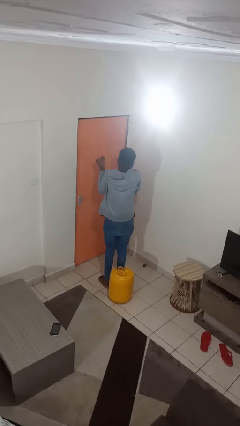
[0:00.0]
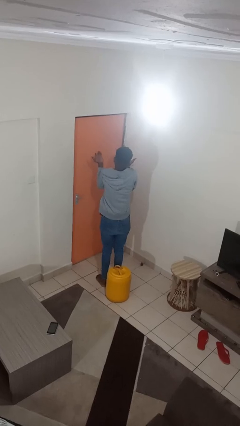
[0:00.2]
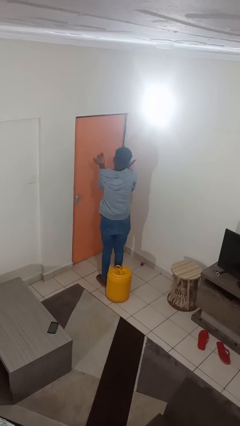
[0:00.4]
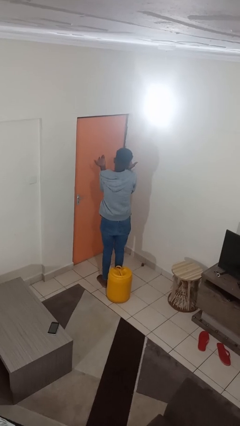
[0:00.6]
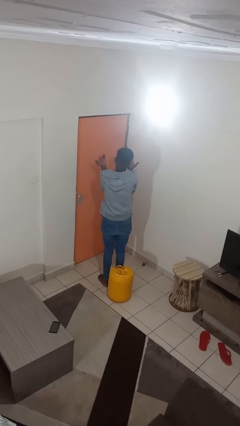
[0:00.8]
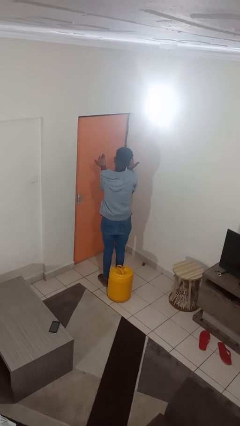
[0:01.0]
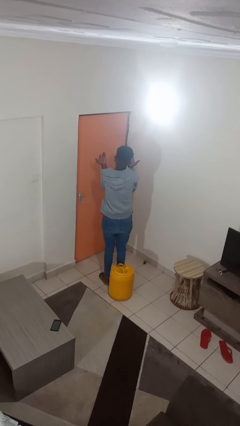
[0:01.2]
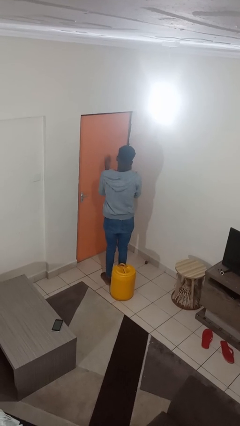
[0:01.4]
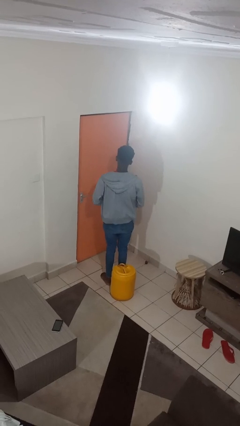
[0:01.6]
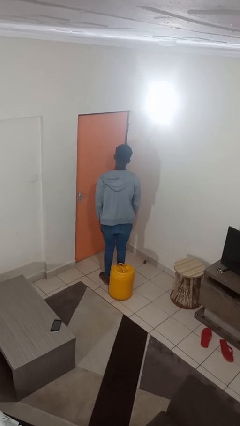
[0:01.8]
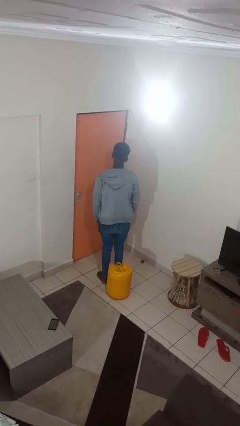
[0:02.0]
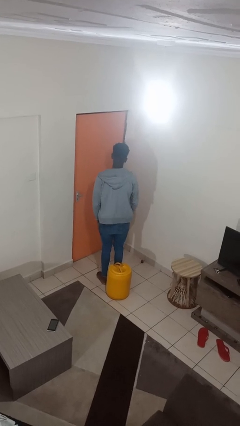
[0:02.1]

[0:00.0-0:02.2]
person shrugs

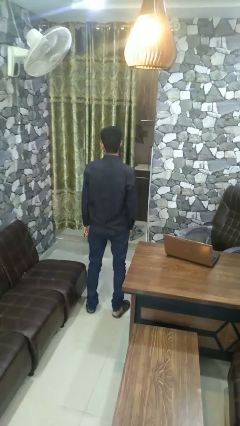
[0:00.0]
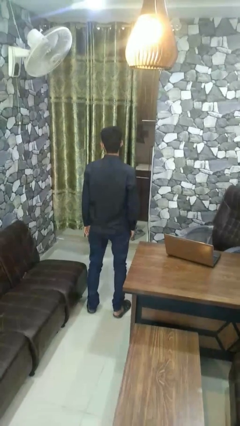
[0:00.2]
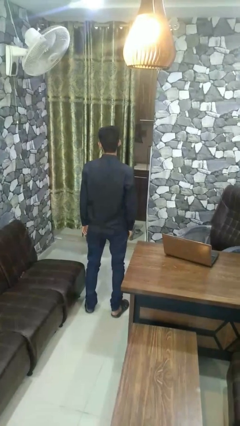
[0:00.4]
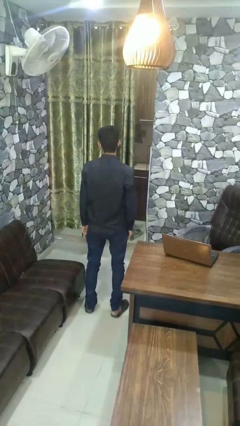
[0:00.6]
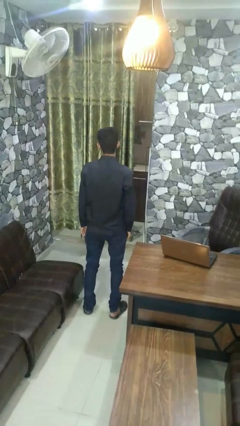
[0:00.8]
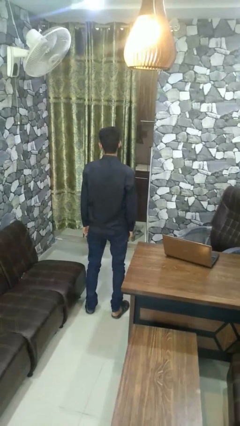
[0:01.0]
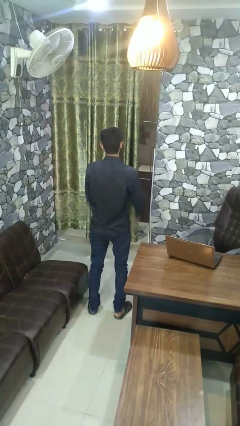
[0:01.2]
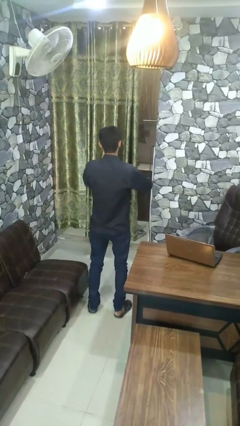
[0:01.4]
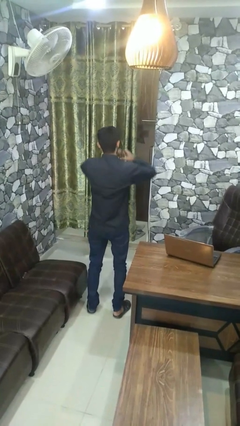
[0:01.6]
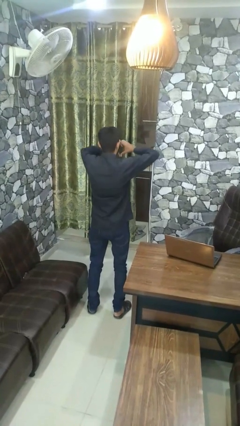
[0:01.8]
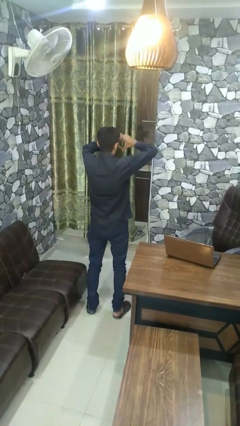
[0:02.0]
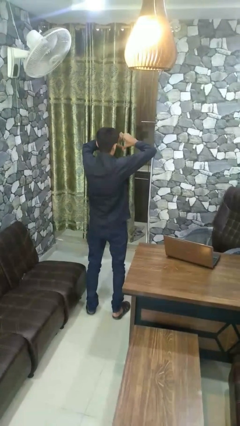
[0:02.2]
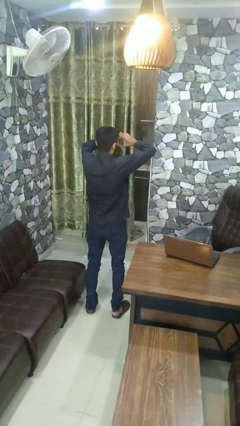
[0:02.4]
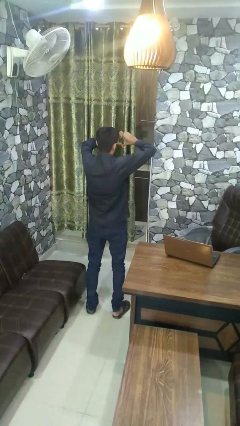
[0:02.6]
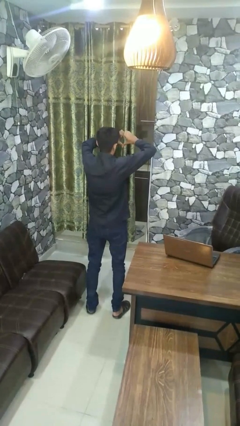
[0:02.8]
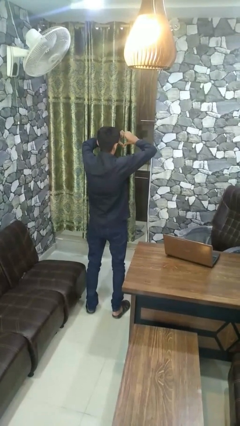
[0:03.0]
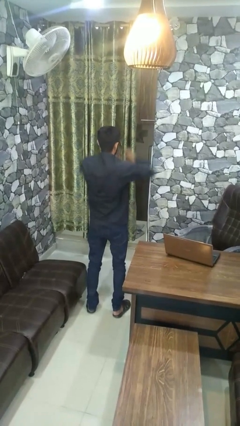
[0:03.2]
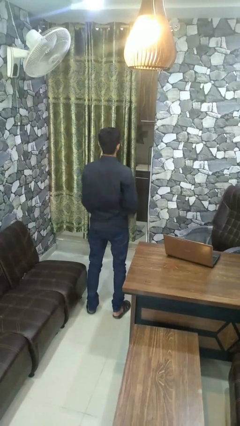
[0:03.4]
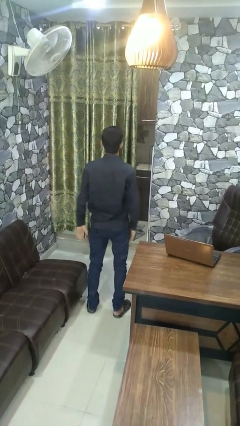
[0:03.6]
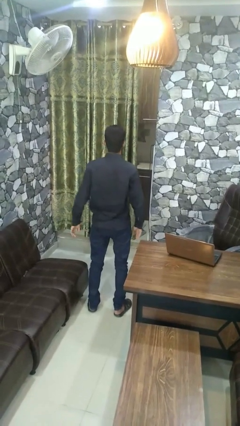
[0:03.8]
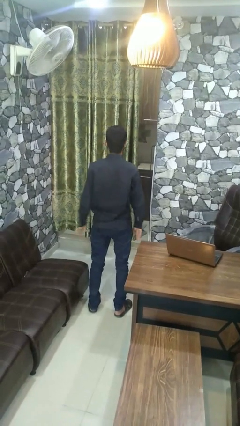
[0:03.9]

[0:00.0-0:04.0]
person gestures heart

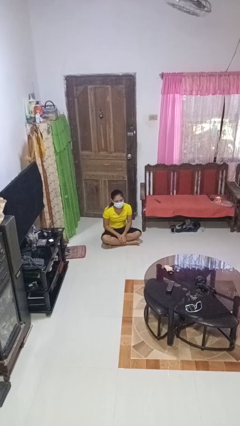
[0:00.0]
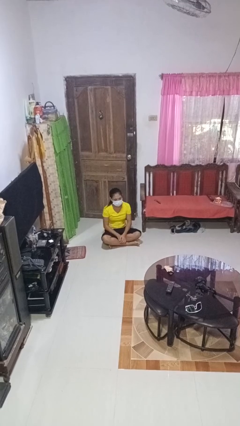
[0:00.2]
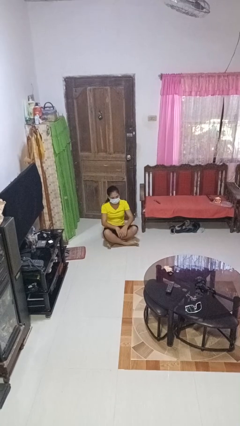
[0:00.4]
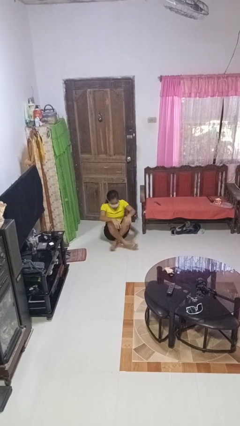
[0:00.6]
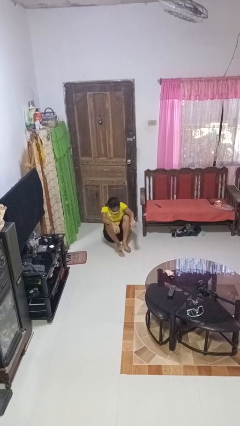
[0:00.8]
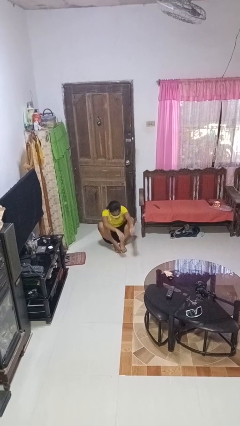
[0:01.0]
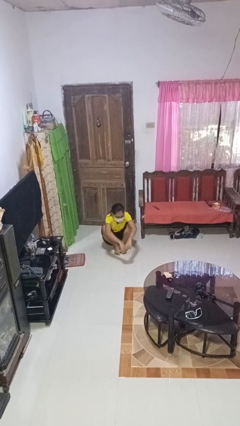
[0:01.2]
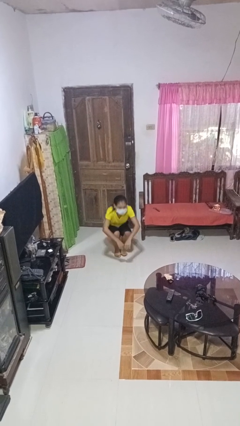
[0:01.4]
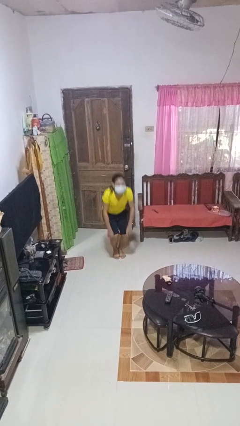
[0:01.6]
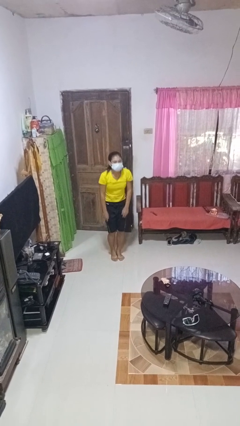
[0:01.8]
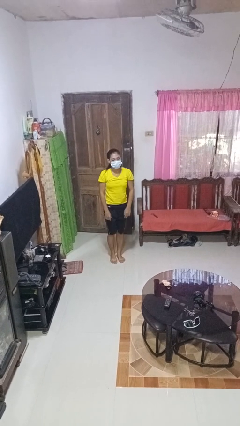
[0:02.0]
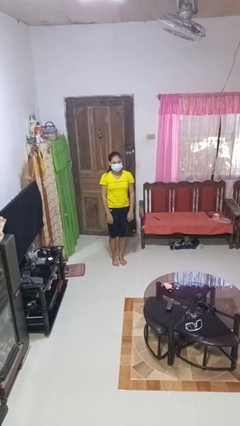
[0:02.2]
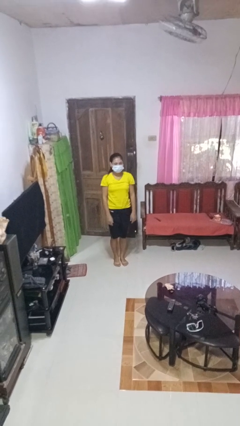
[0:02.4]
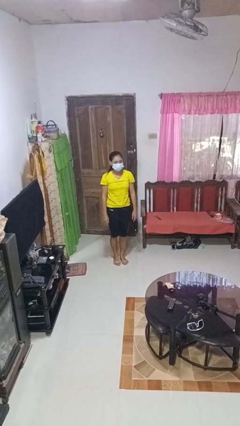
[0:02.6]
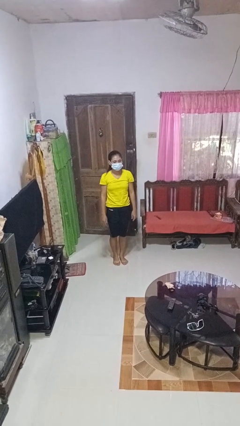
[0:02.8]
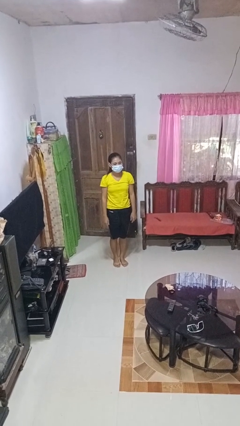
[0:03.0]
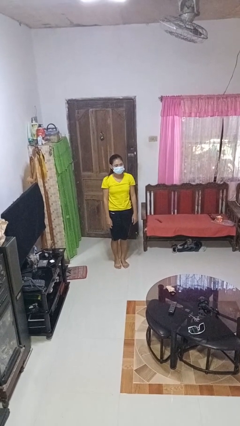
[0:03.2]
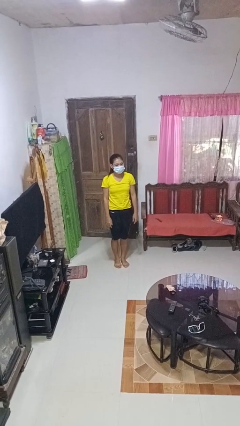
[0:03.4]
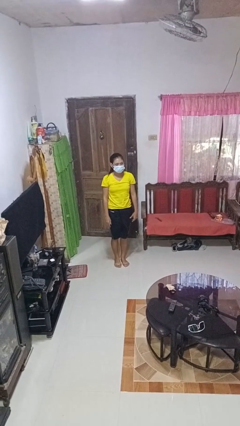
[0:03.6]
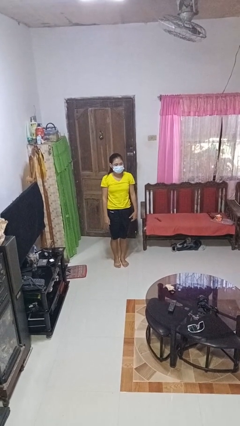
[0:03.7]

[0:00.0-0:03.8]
person stands up from floor

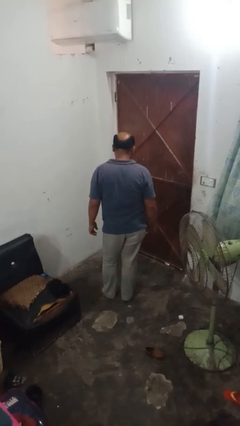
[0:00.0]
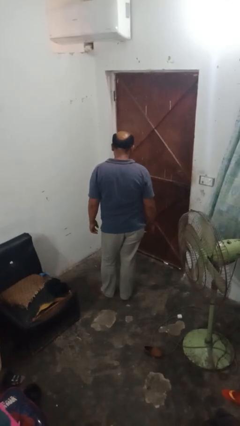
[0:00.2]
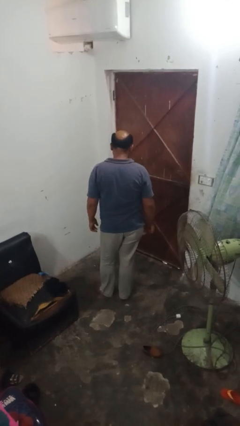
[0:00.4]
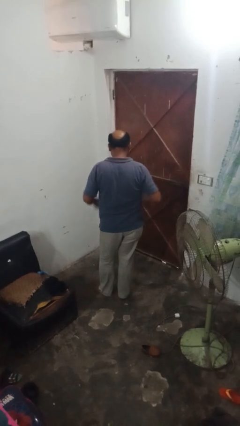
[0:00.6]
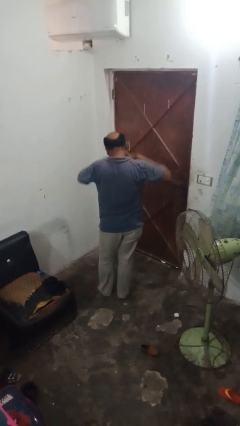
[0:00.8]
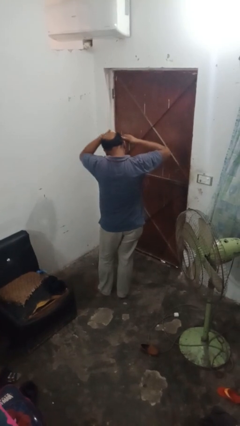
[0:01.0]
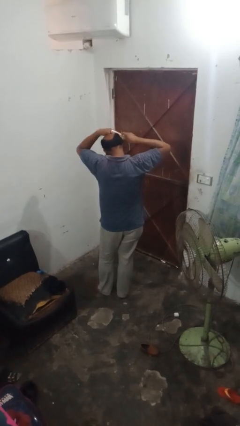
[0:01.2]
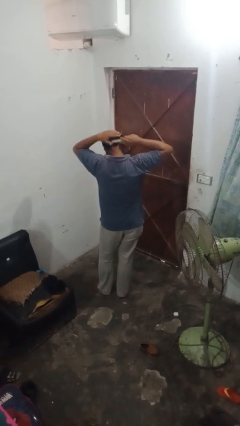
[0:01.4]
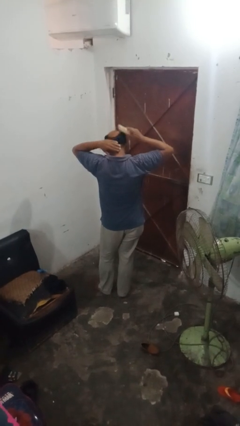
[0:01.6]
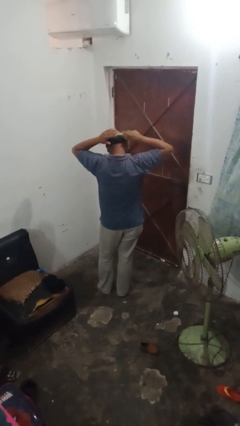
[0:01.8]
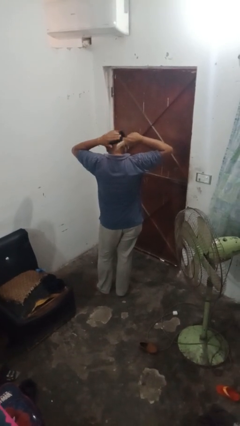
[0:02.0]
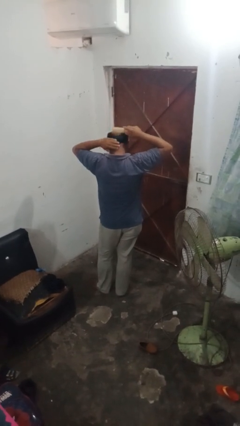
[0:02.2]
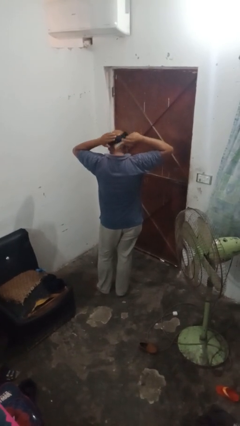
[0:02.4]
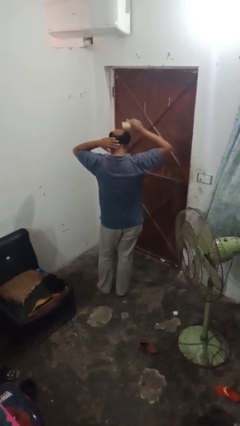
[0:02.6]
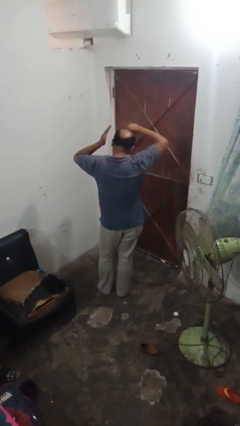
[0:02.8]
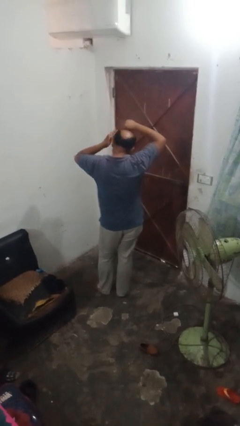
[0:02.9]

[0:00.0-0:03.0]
person brushes hair

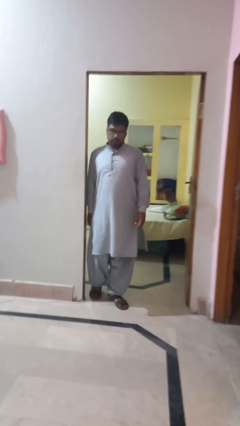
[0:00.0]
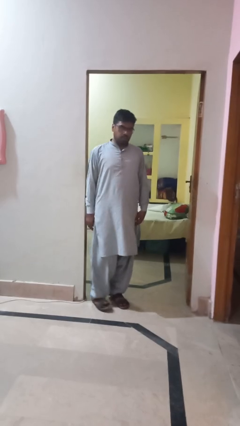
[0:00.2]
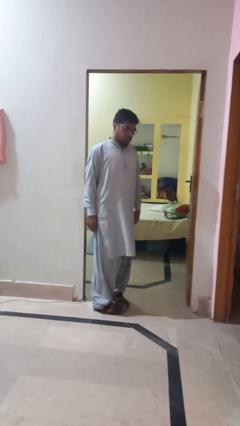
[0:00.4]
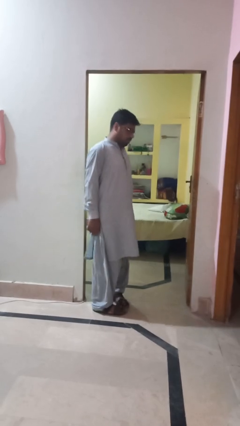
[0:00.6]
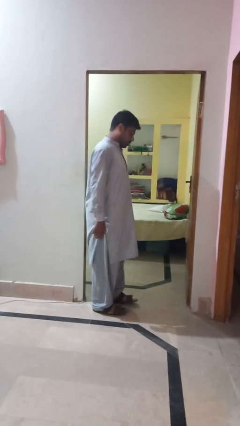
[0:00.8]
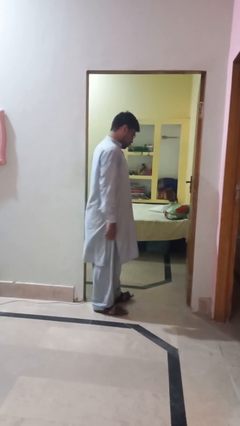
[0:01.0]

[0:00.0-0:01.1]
person bumps into wall

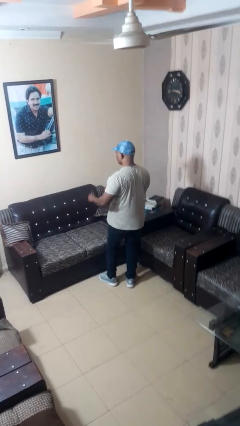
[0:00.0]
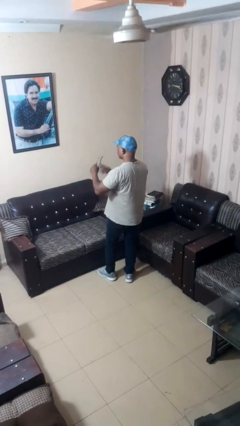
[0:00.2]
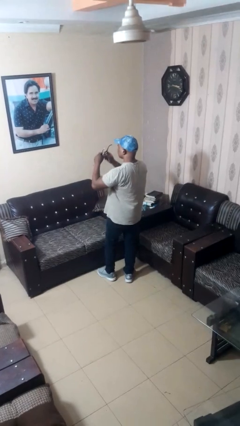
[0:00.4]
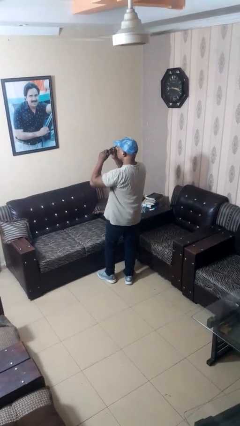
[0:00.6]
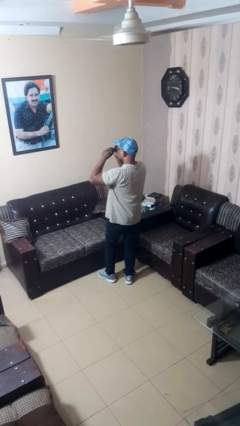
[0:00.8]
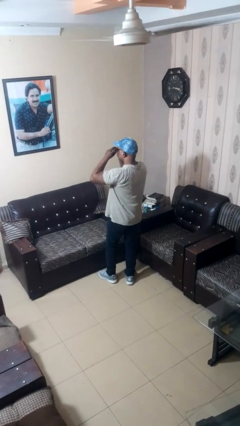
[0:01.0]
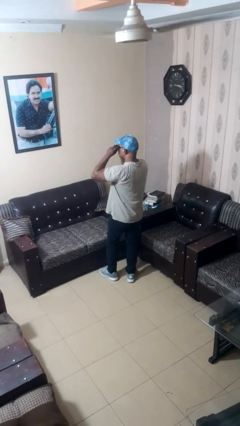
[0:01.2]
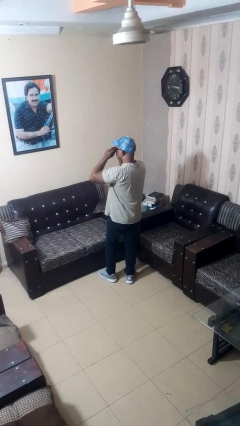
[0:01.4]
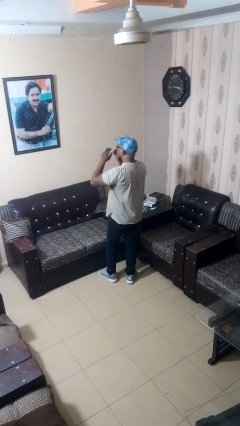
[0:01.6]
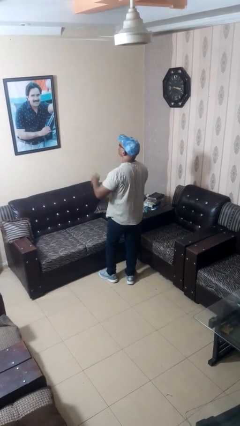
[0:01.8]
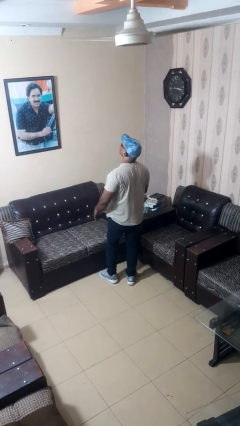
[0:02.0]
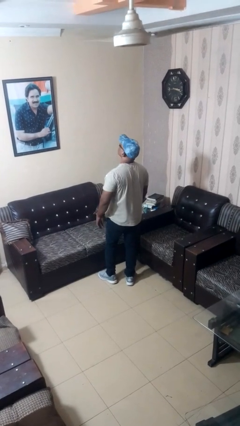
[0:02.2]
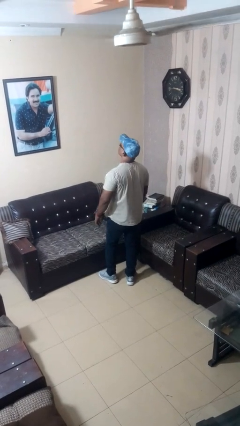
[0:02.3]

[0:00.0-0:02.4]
person puts on glasses

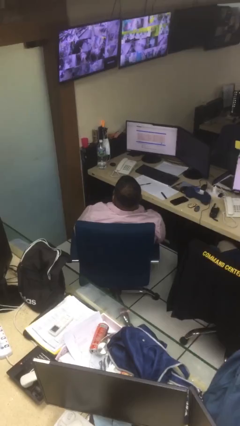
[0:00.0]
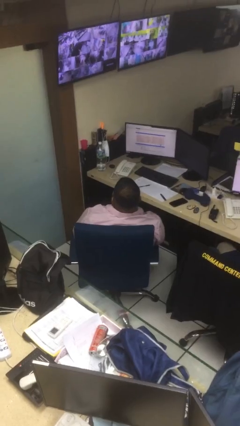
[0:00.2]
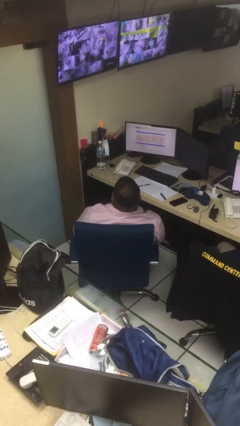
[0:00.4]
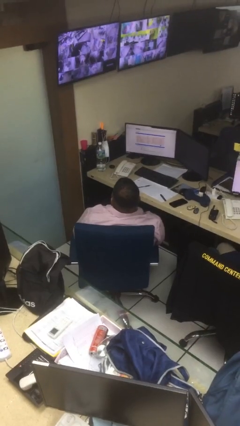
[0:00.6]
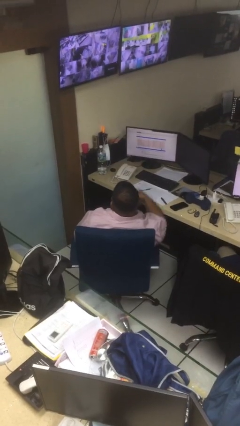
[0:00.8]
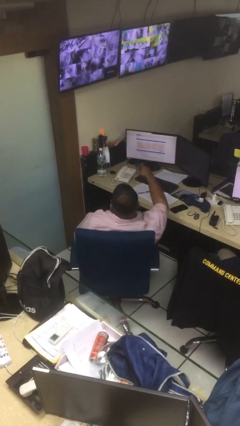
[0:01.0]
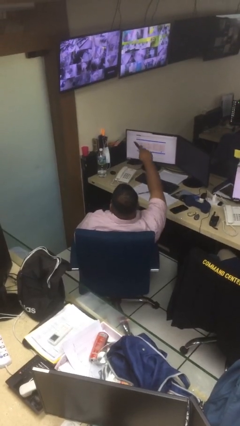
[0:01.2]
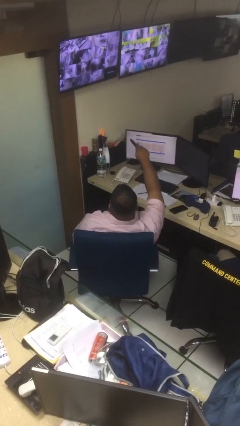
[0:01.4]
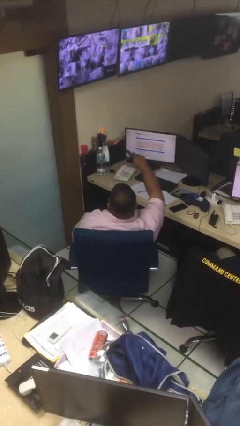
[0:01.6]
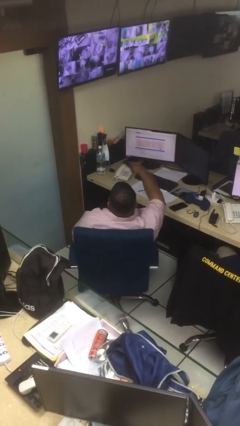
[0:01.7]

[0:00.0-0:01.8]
person uses television remote
